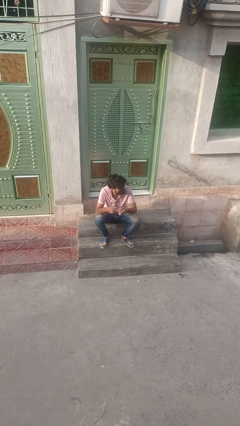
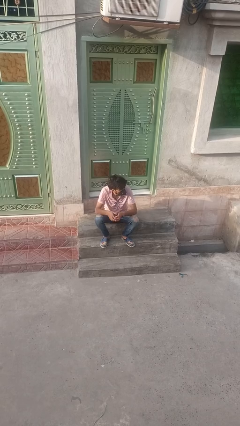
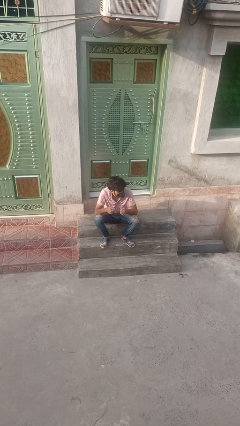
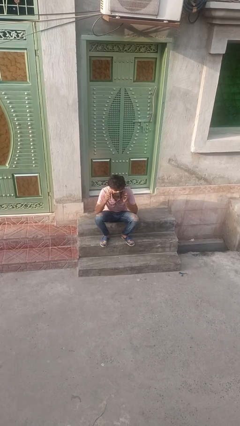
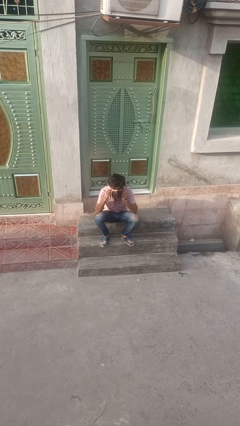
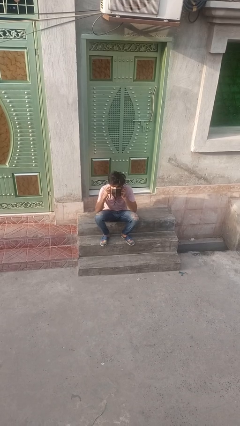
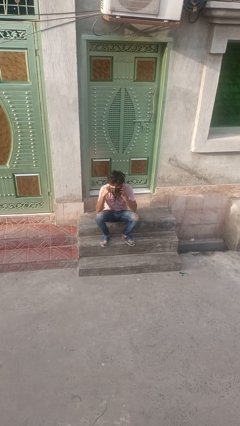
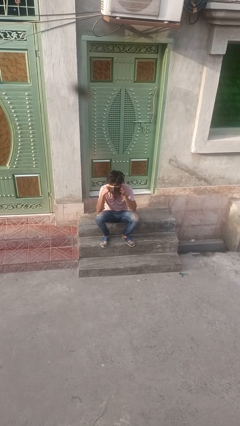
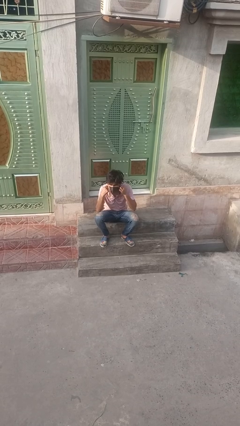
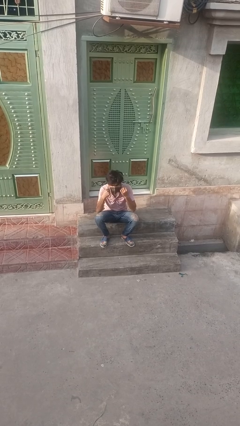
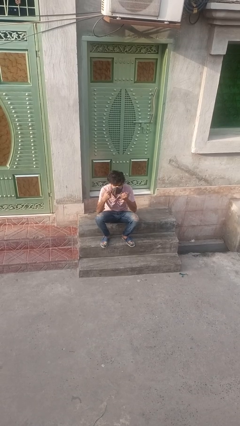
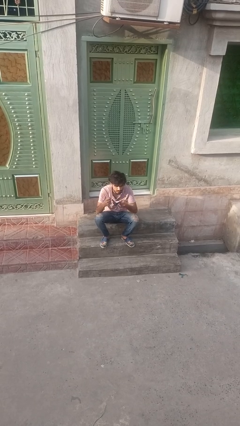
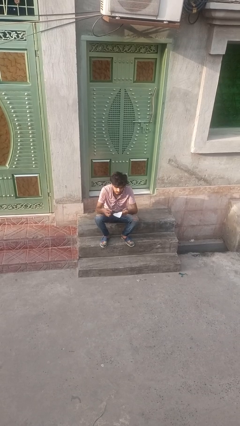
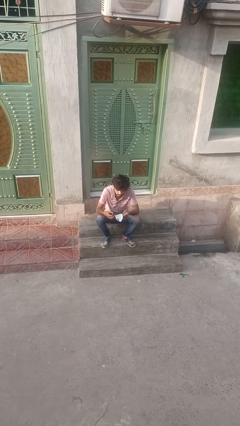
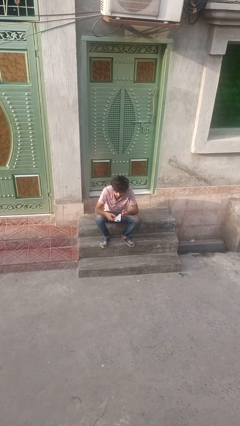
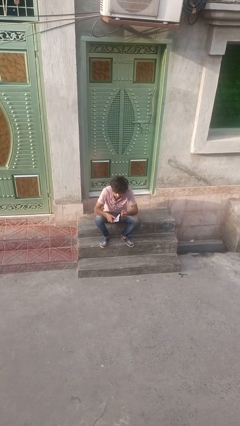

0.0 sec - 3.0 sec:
person takes off facemask

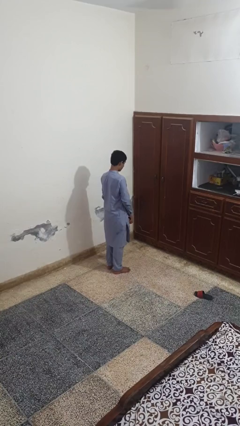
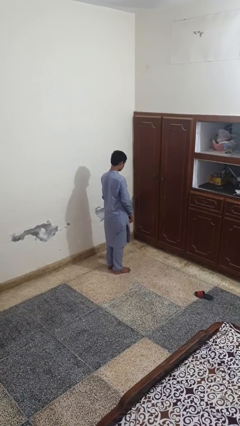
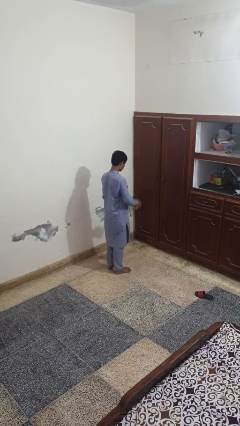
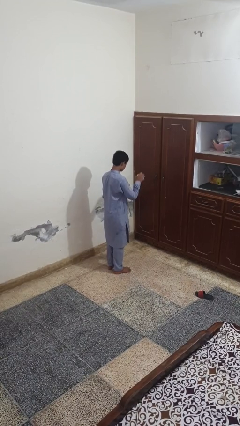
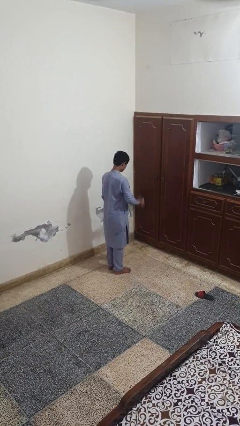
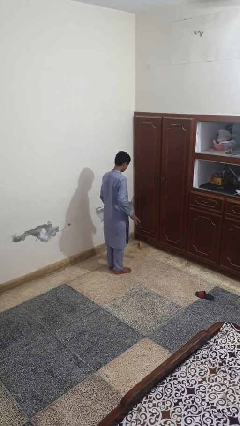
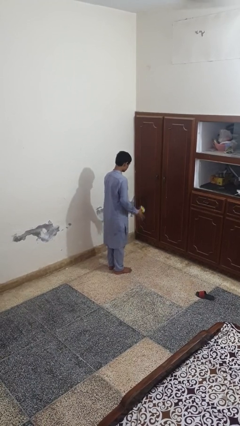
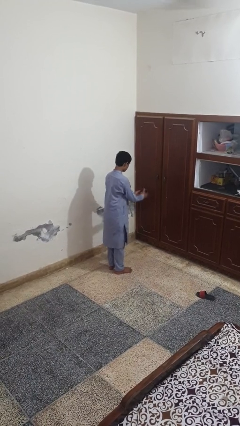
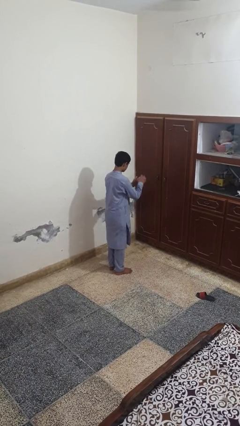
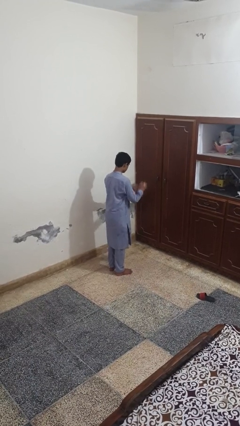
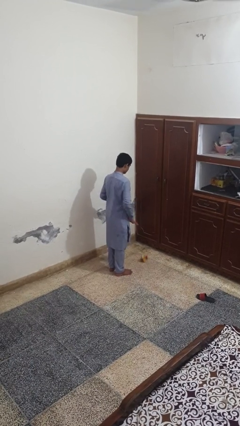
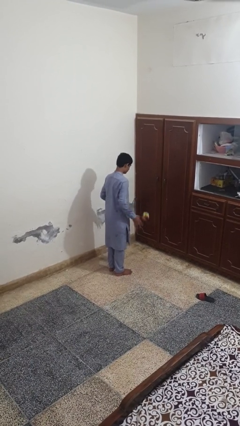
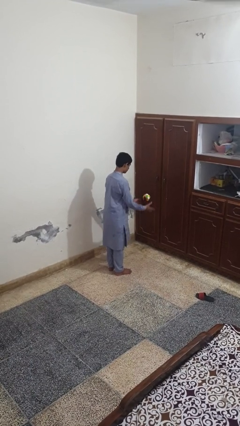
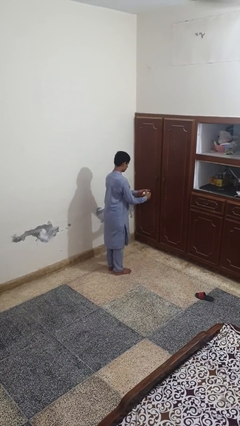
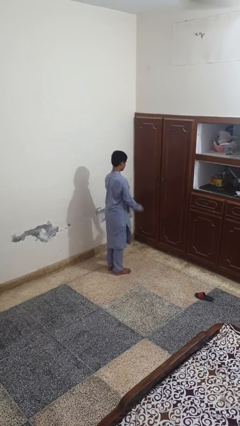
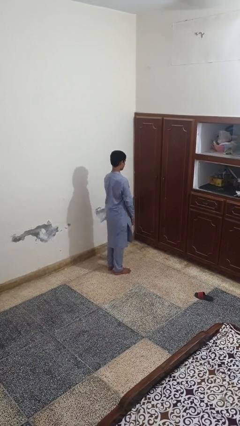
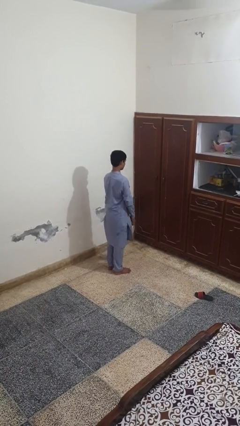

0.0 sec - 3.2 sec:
person bounces ball on floor

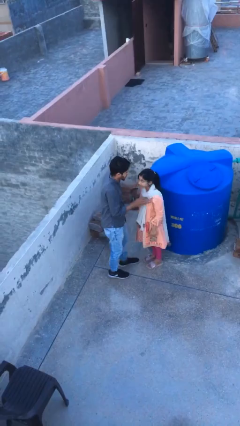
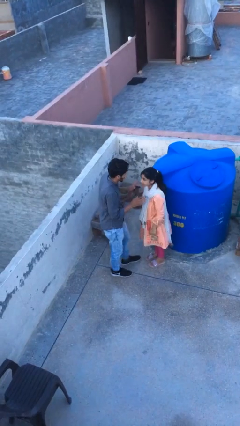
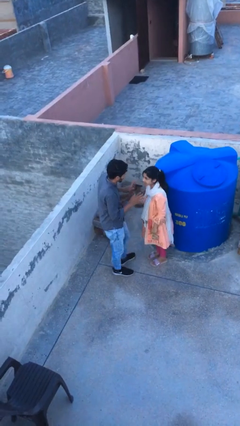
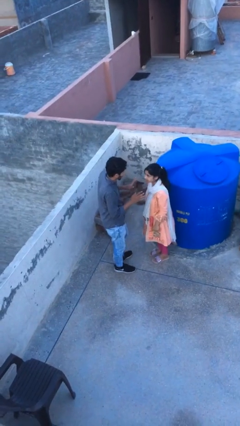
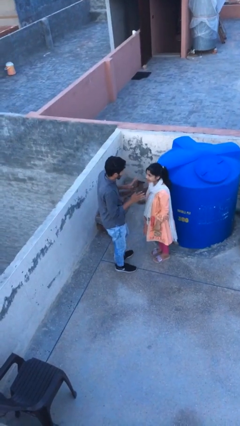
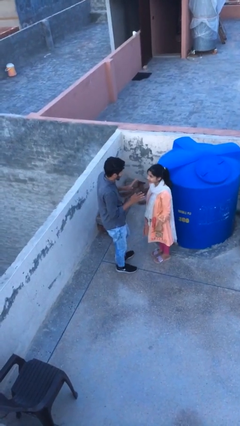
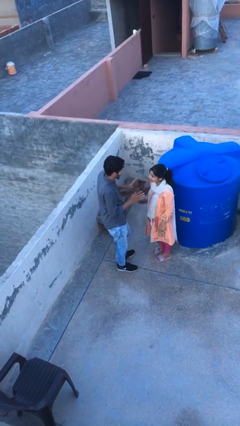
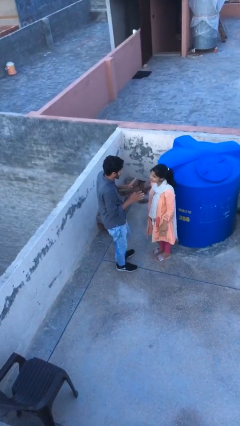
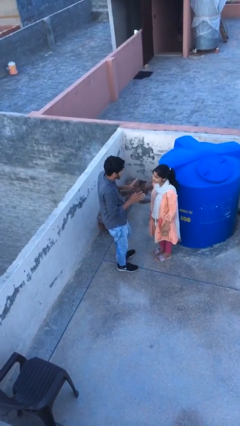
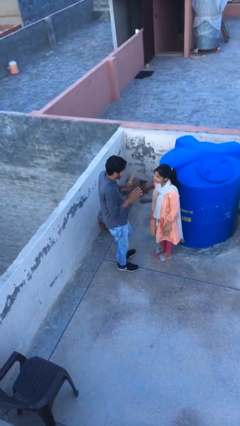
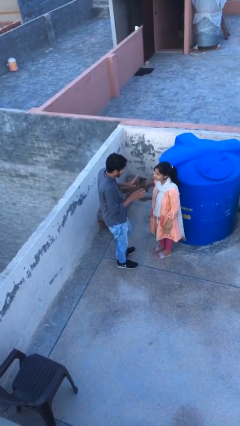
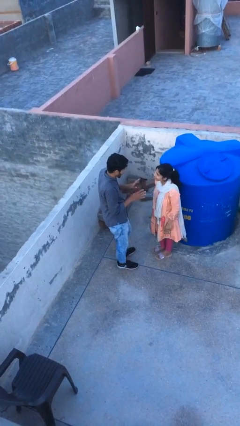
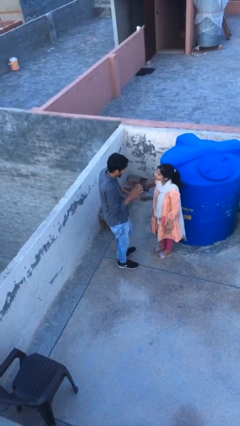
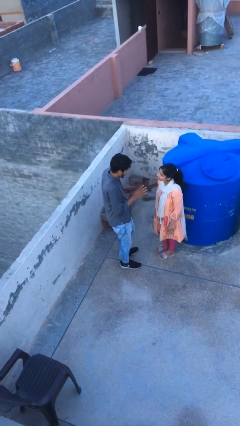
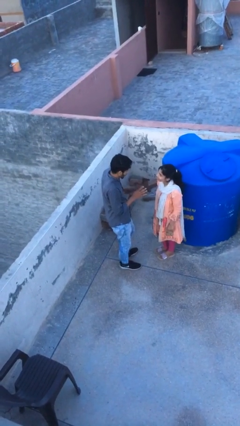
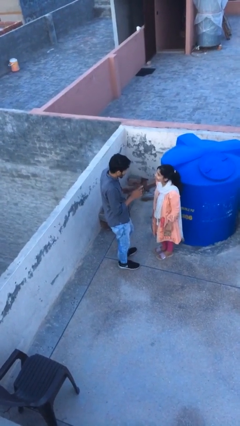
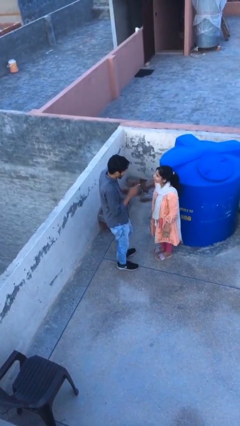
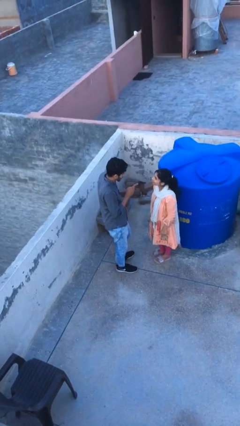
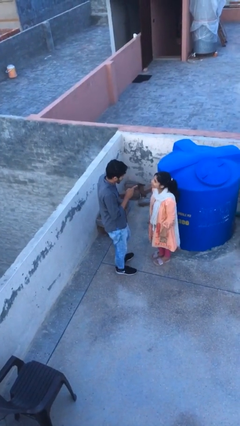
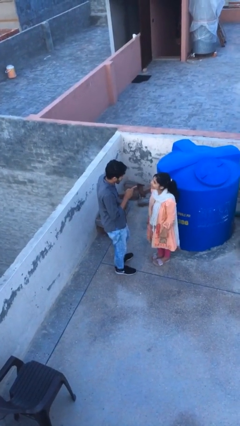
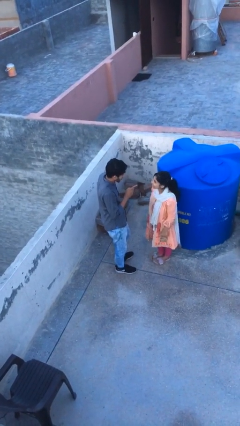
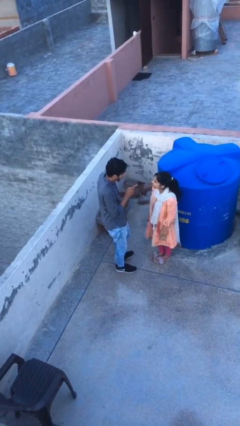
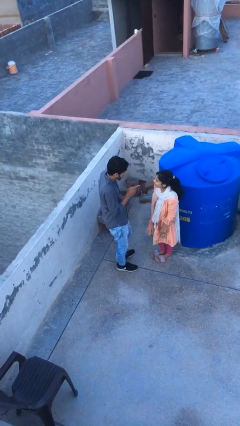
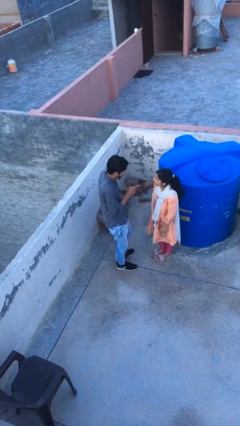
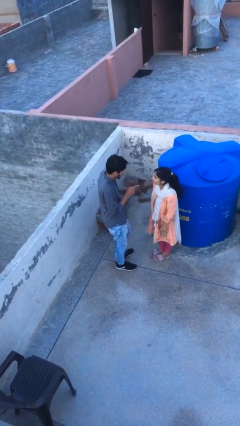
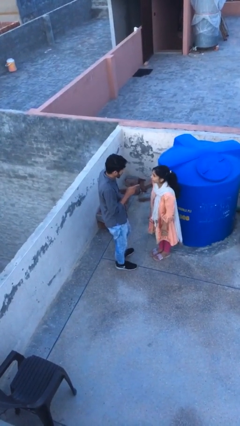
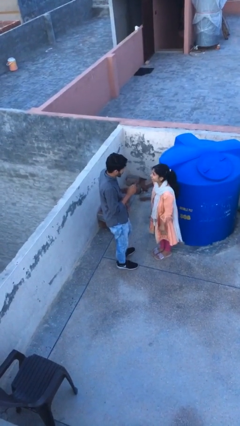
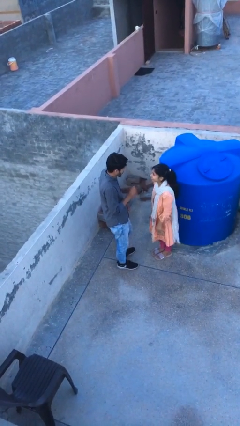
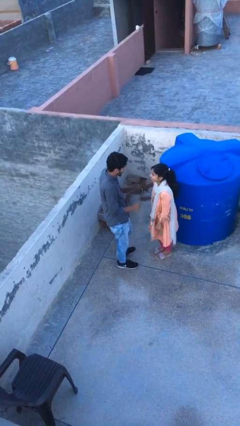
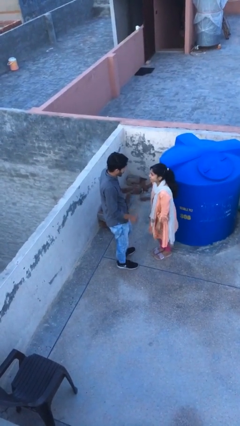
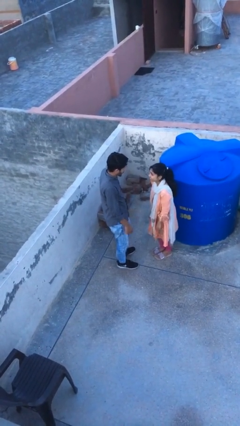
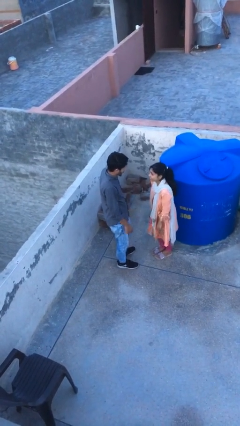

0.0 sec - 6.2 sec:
person talks to person

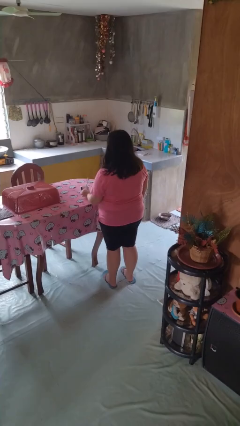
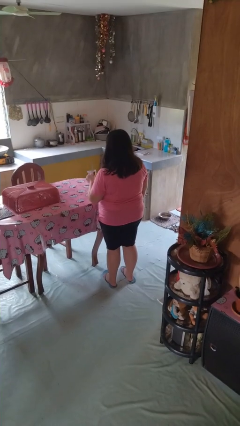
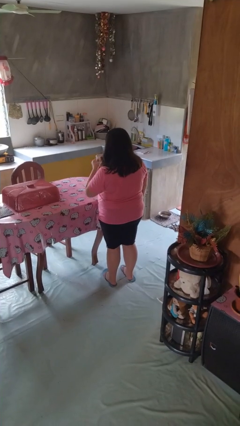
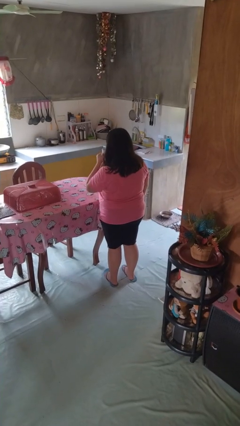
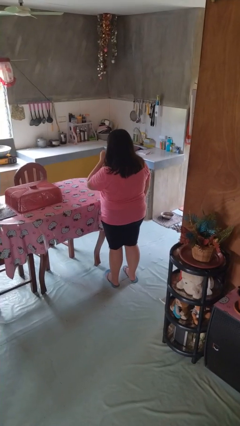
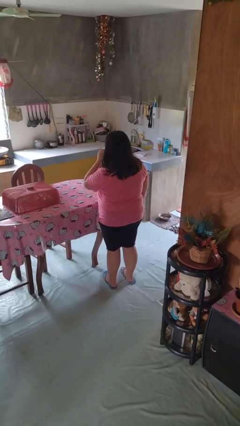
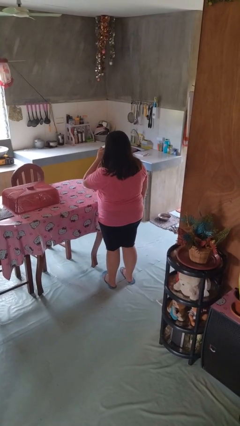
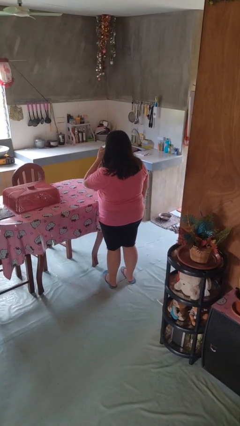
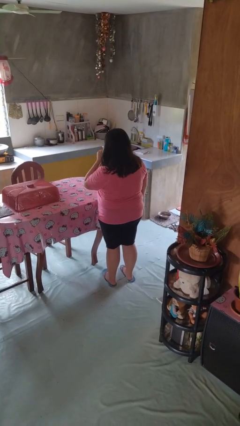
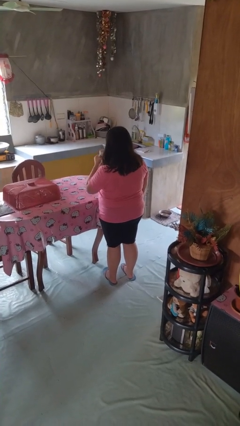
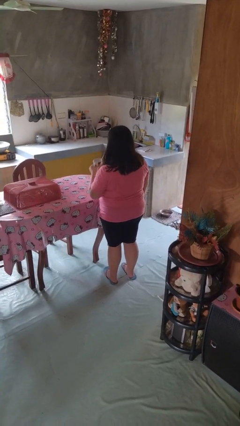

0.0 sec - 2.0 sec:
person drinks from mug

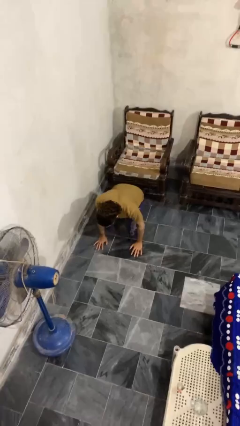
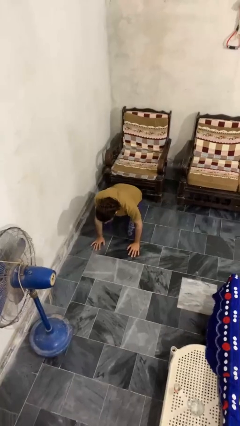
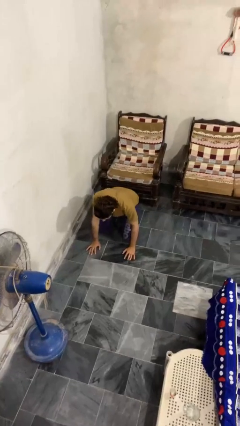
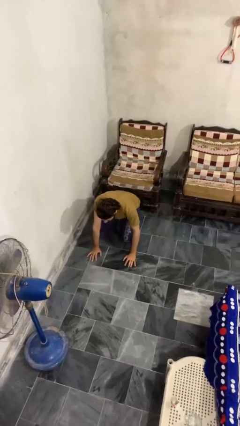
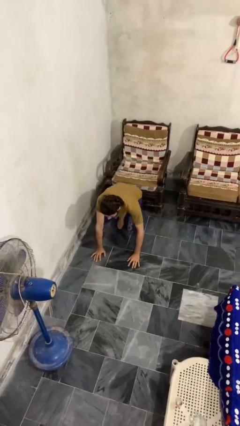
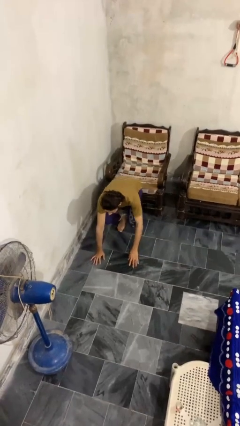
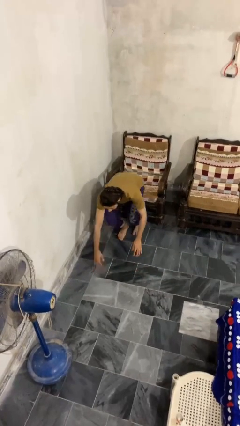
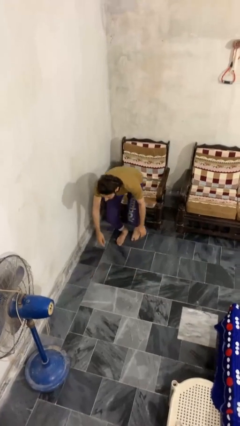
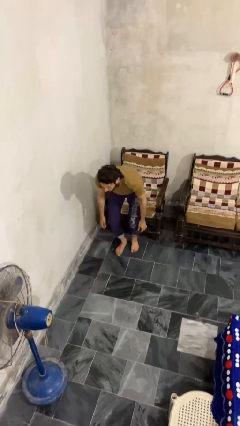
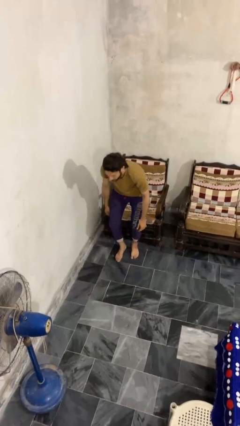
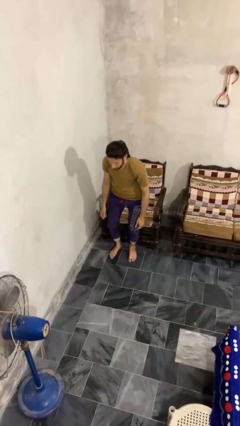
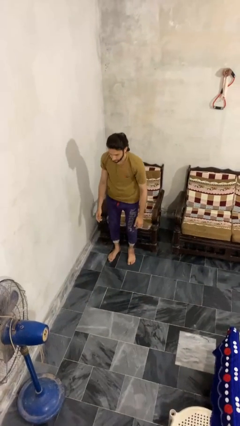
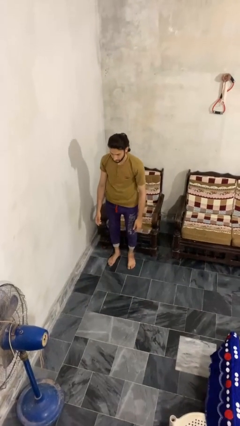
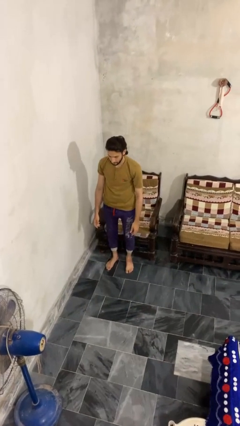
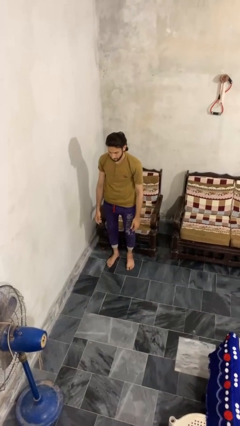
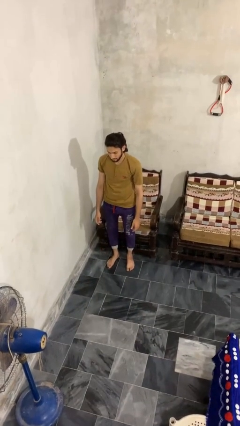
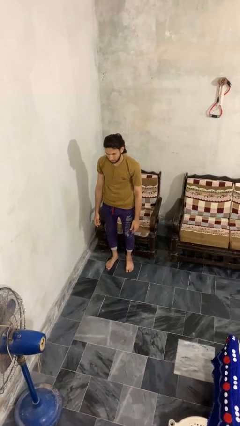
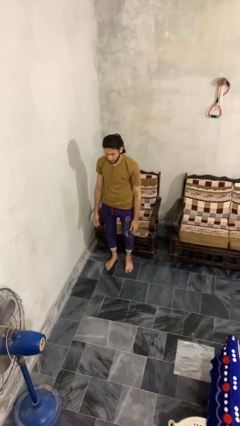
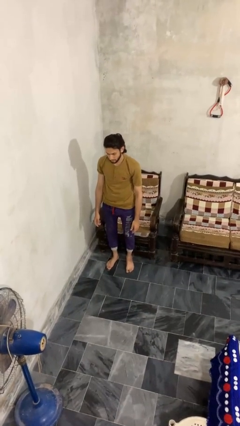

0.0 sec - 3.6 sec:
person stands up from floor
